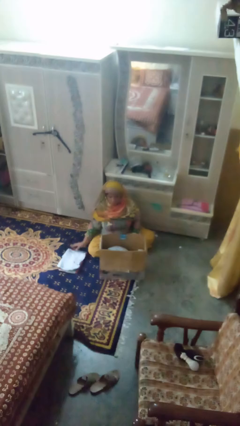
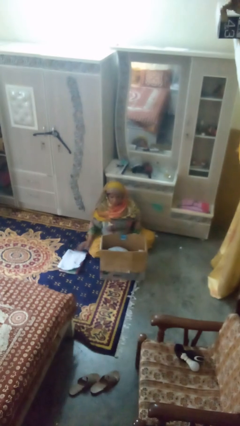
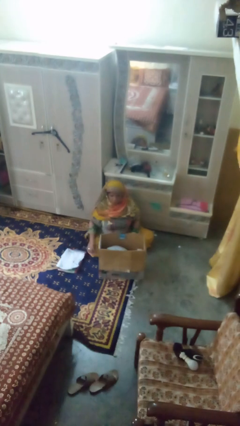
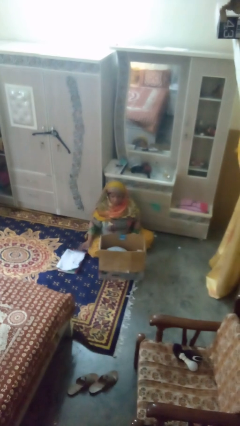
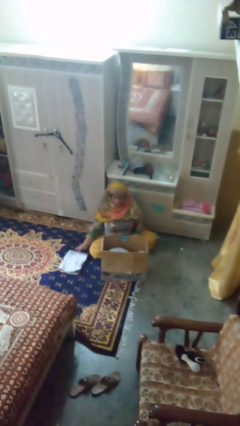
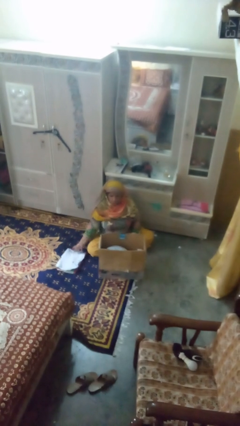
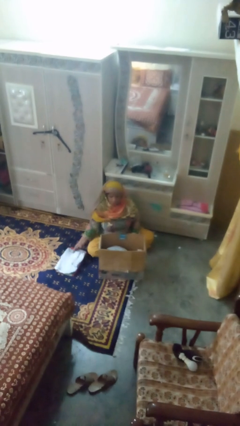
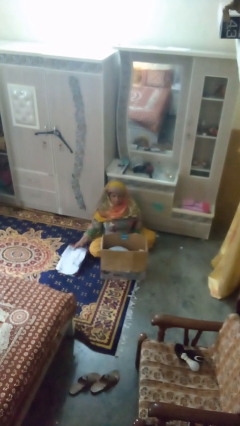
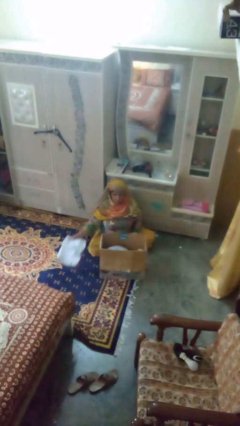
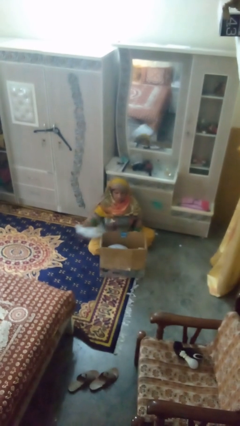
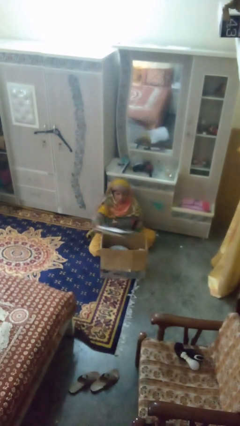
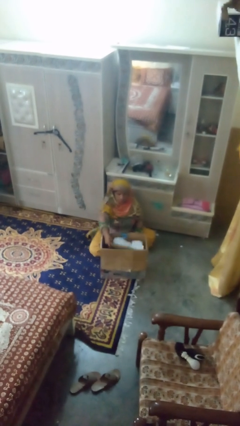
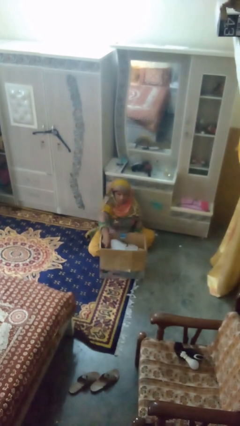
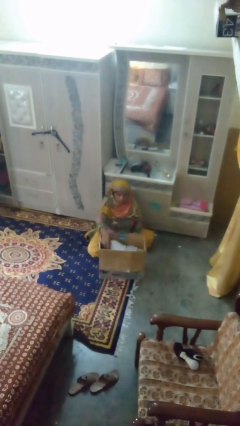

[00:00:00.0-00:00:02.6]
person puts object into box

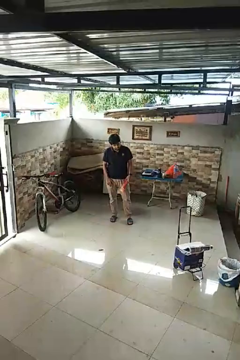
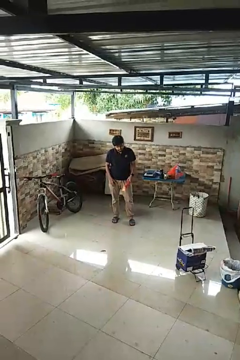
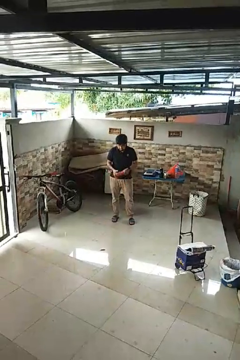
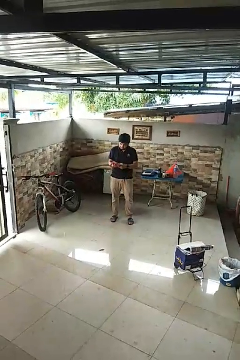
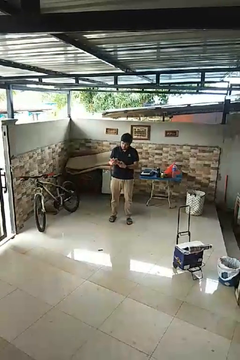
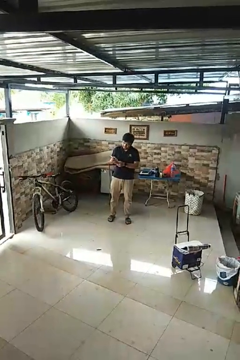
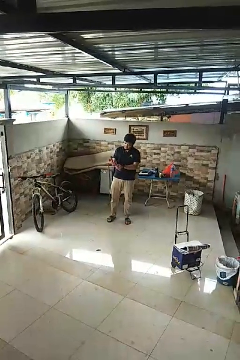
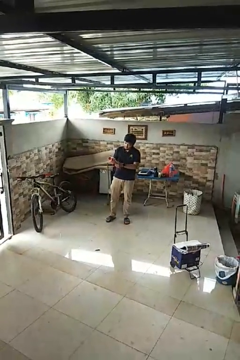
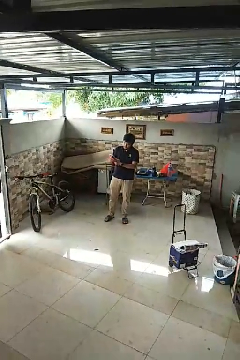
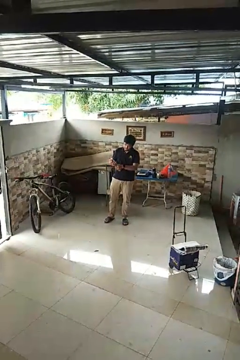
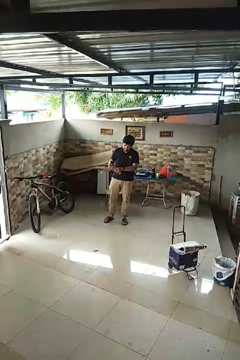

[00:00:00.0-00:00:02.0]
person squeezes object

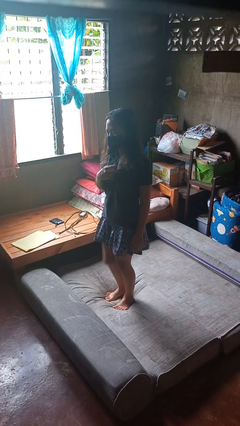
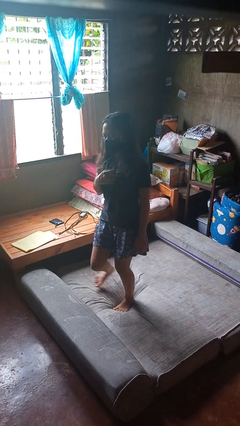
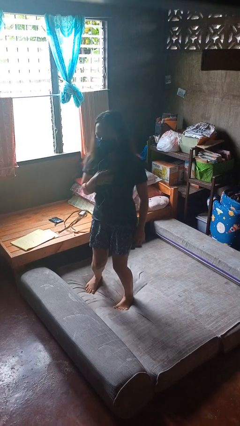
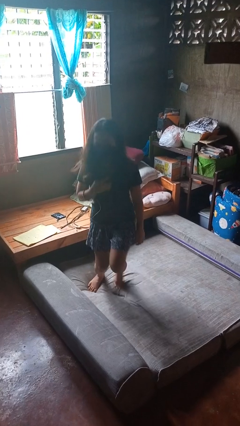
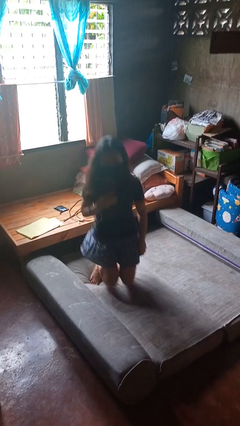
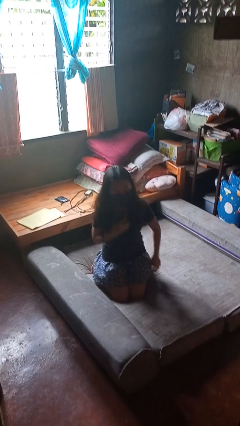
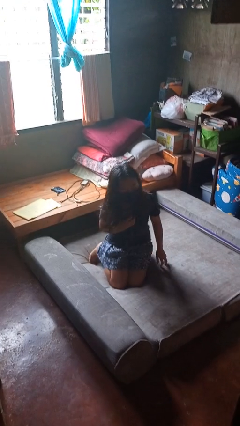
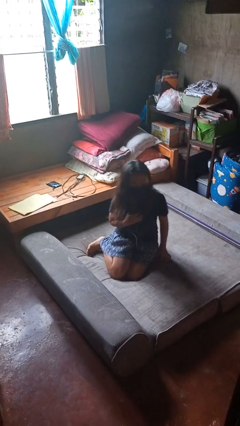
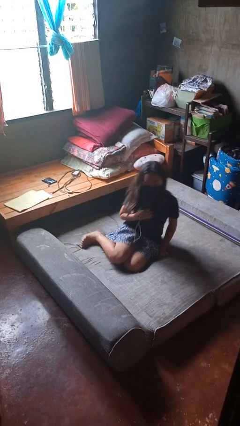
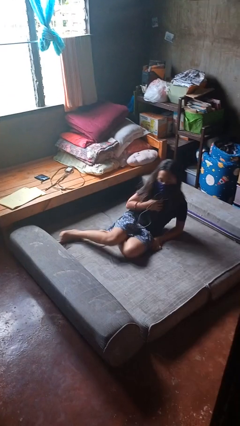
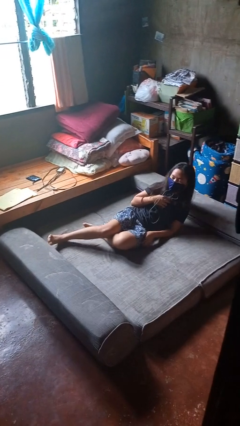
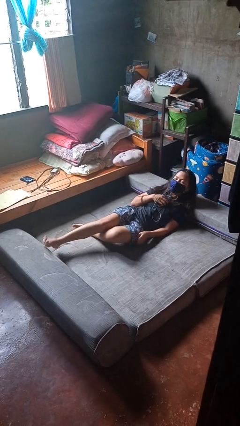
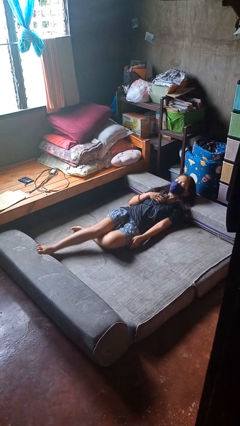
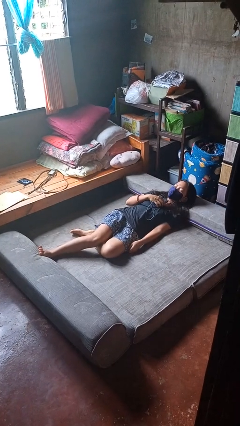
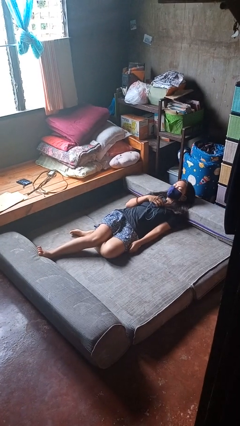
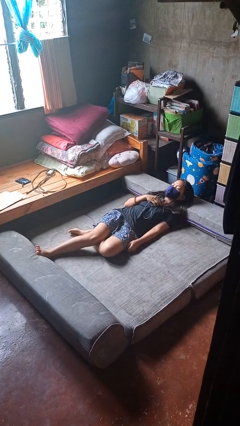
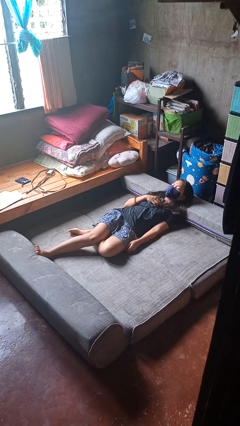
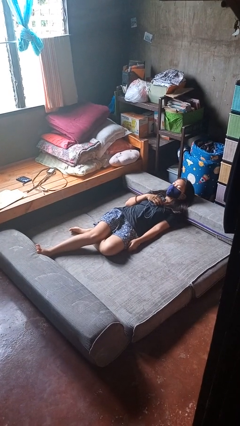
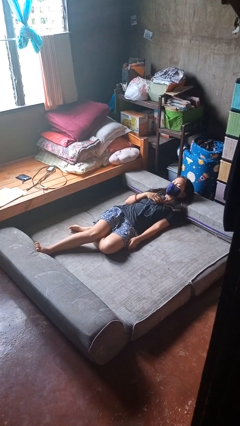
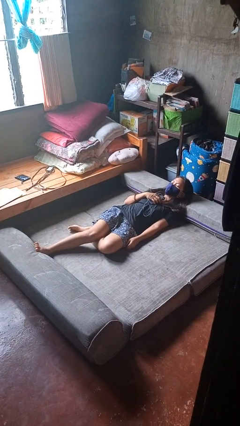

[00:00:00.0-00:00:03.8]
person lies down on bed

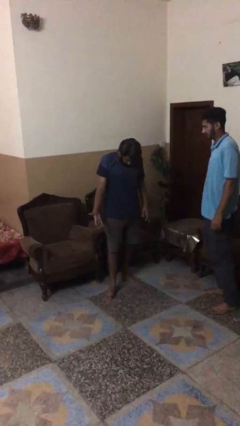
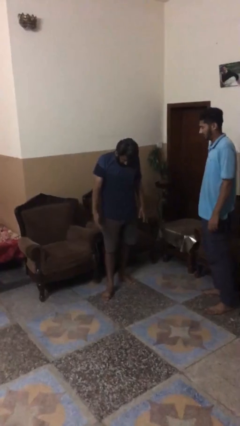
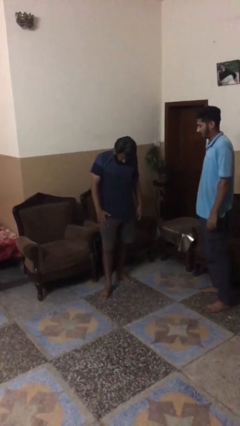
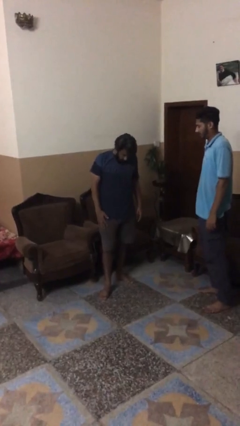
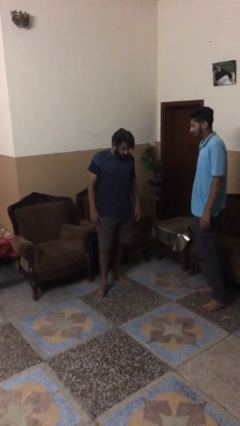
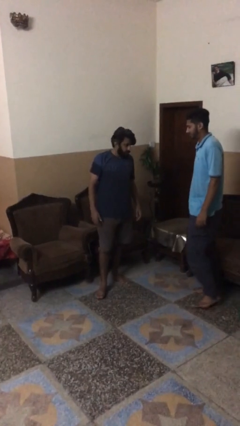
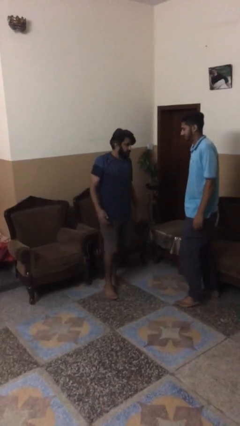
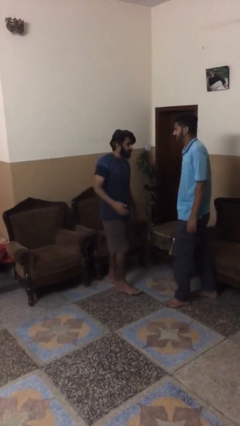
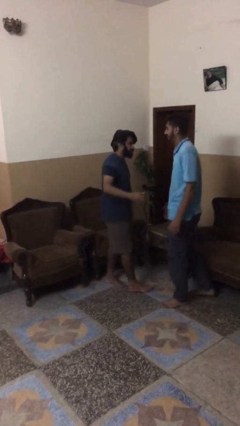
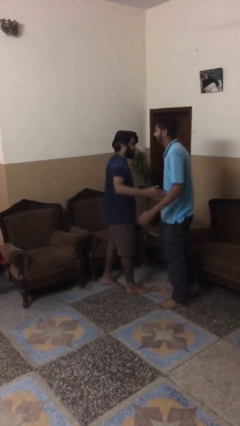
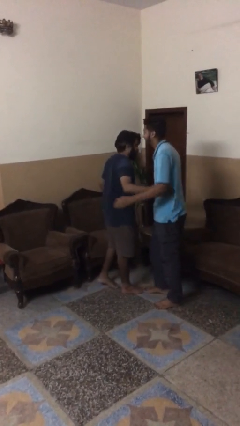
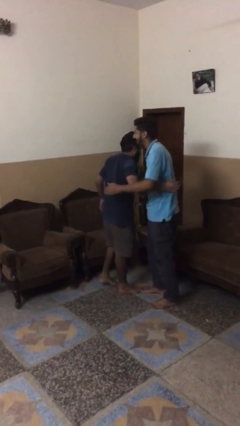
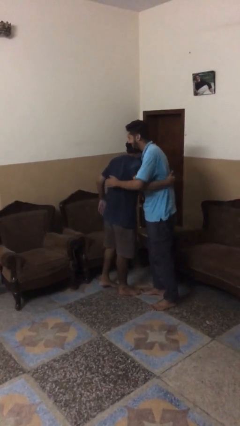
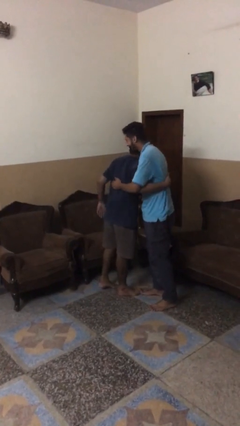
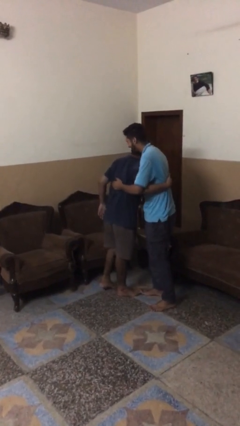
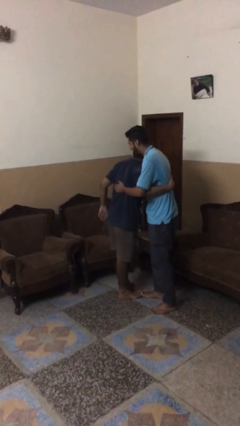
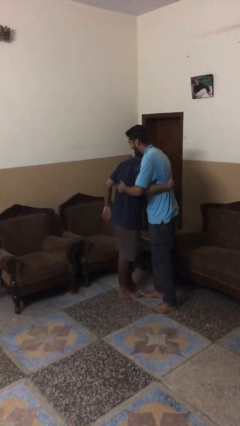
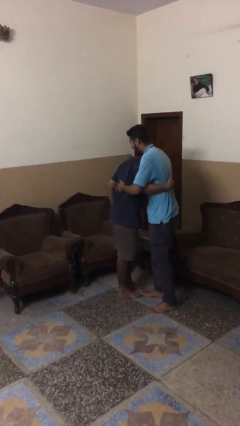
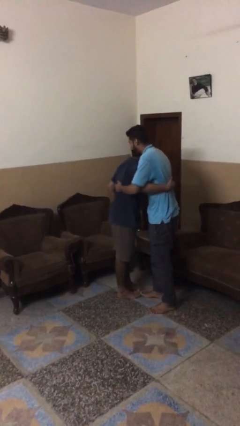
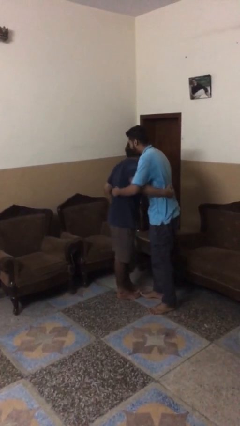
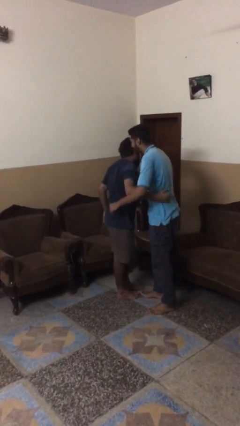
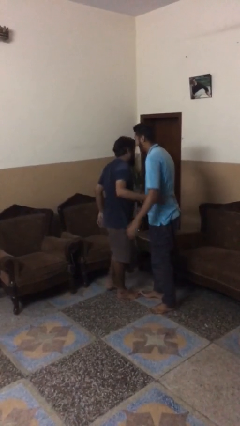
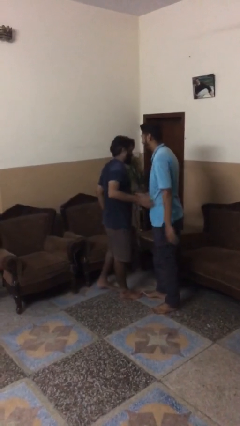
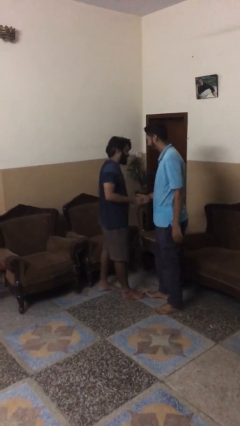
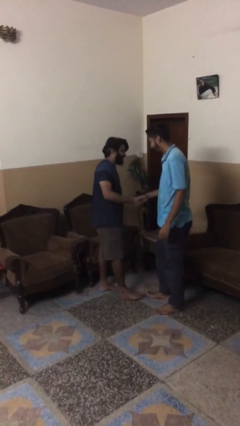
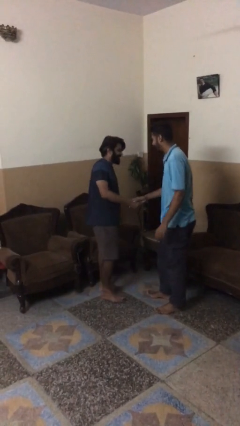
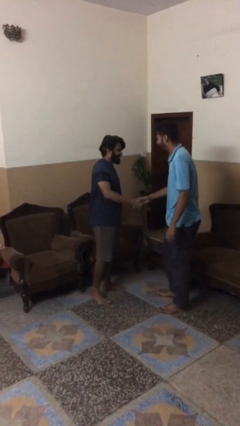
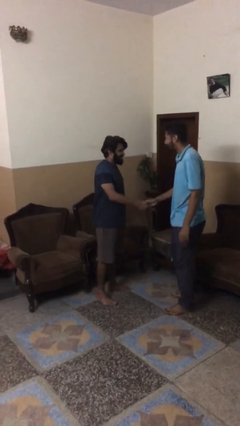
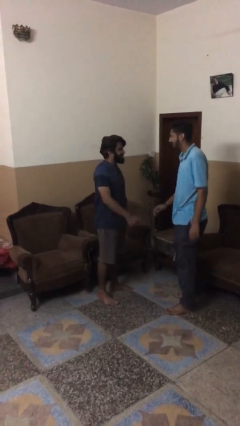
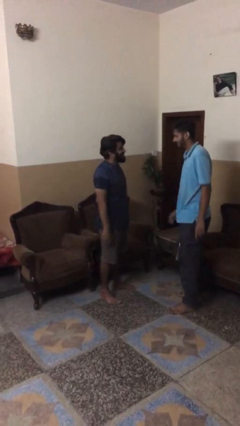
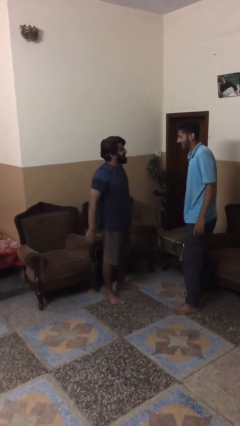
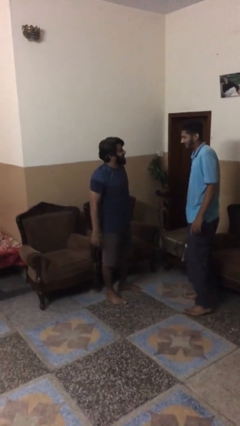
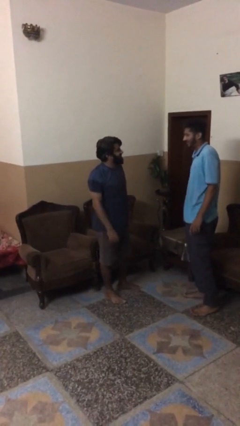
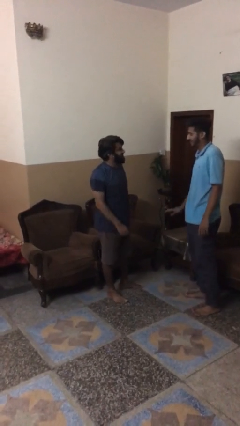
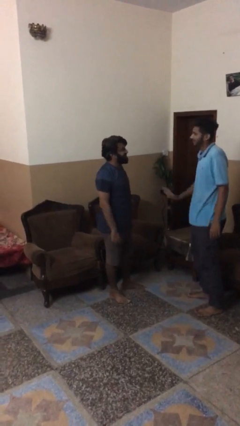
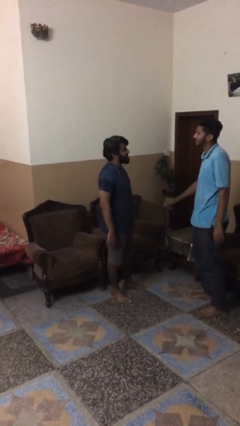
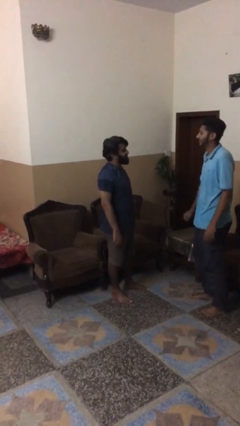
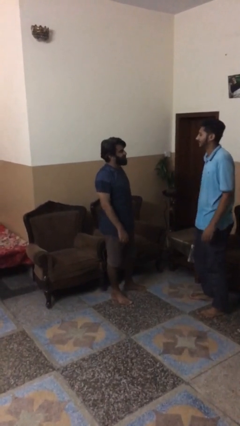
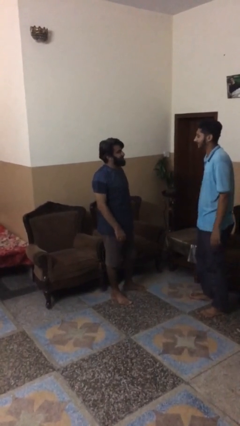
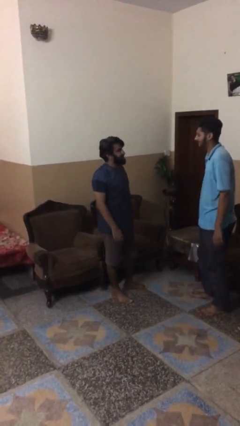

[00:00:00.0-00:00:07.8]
person embraces person

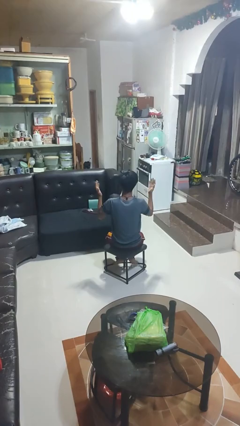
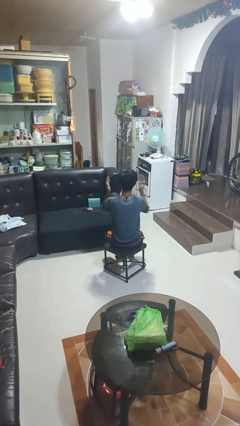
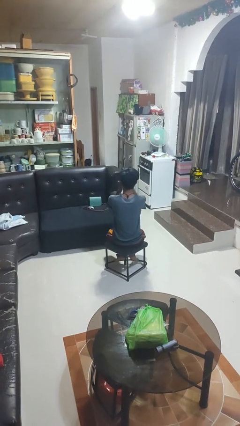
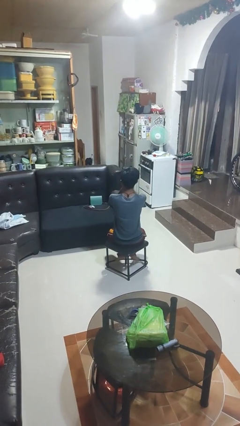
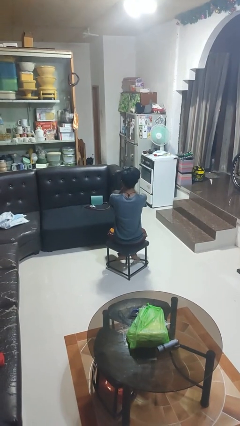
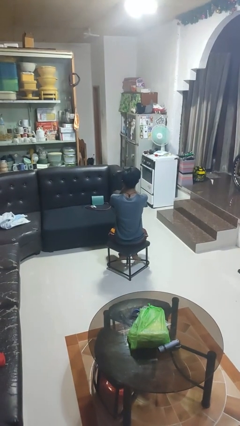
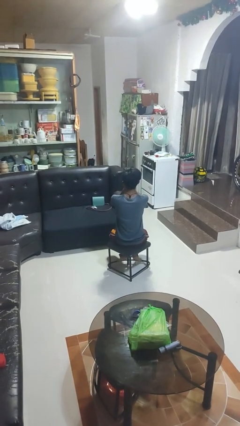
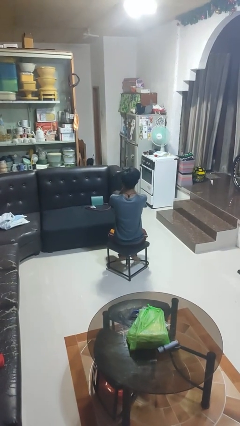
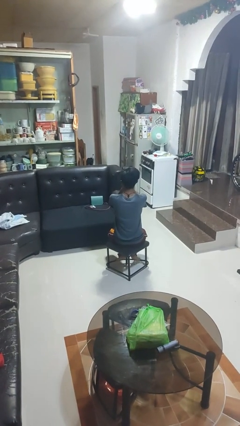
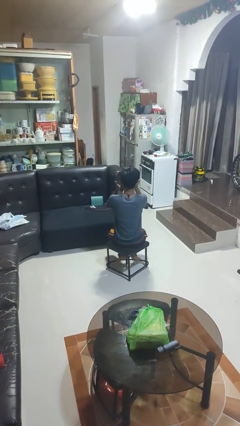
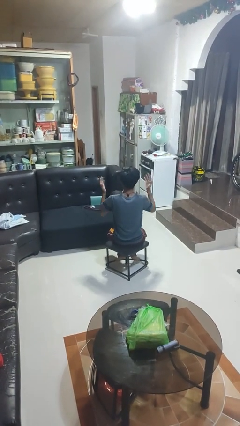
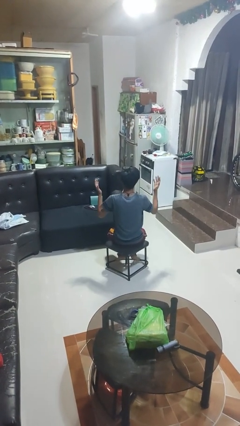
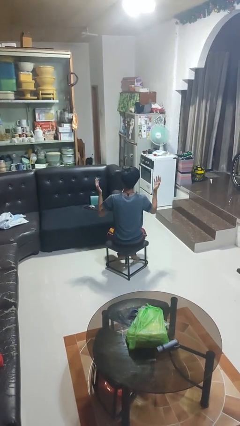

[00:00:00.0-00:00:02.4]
person covers face with hands
